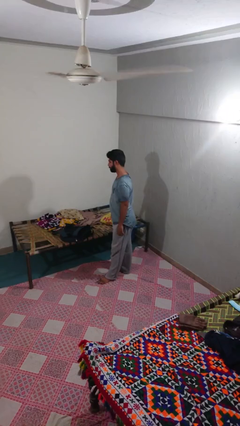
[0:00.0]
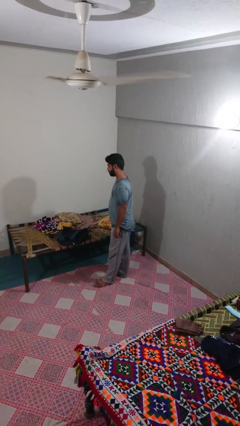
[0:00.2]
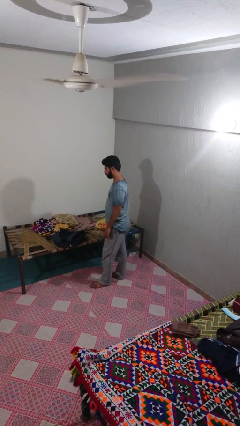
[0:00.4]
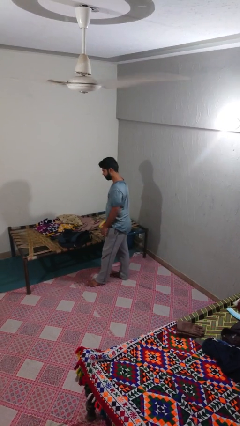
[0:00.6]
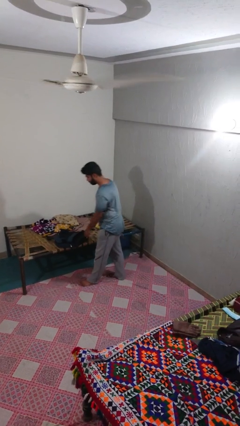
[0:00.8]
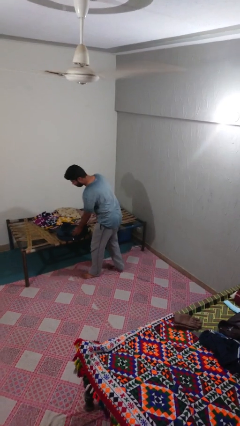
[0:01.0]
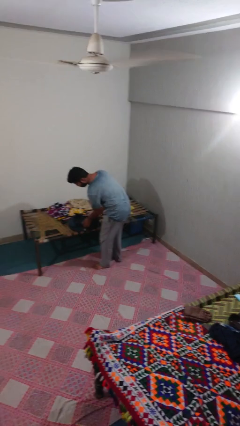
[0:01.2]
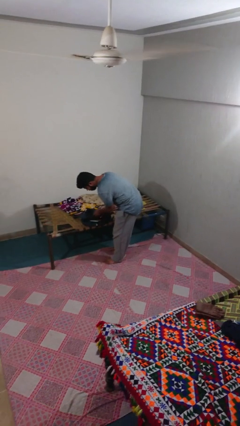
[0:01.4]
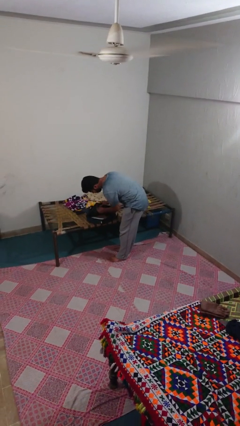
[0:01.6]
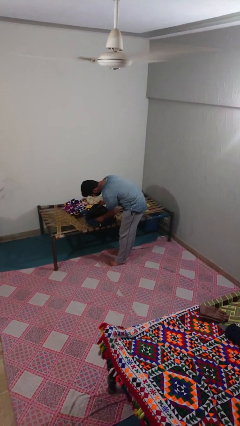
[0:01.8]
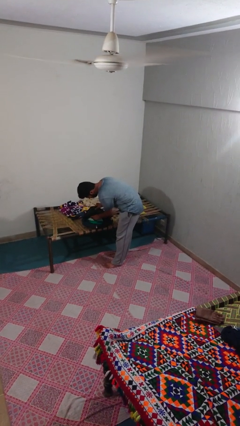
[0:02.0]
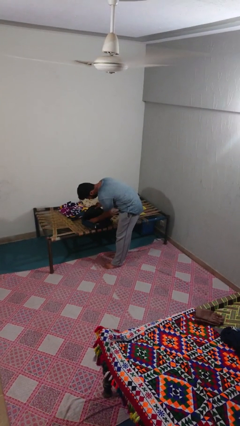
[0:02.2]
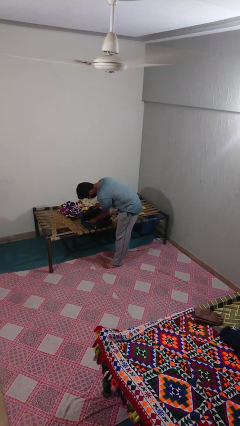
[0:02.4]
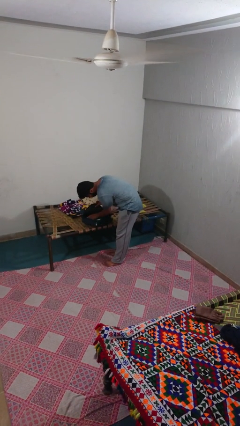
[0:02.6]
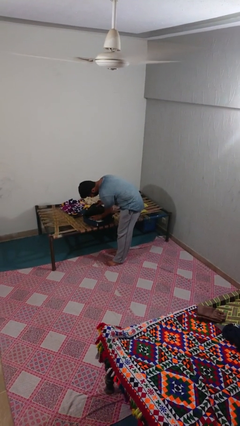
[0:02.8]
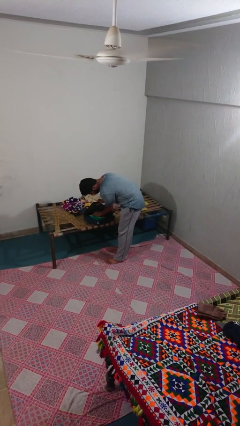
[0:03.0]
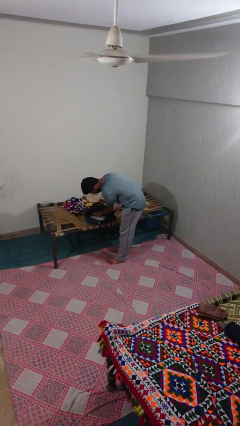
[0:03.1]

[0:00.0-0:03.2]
person searches in backpack

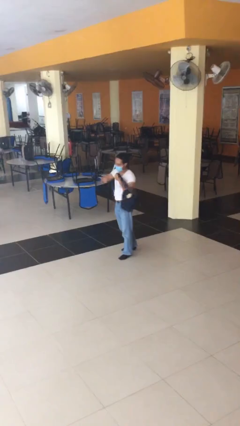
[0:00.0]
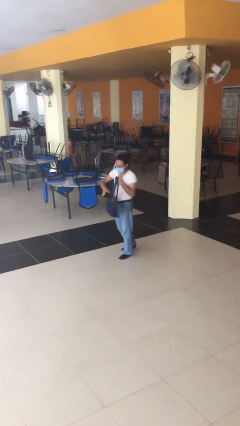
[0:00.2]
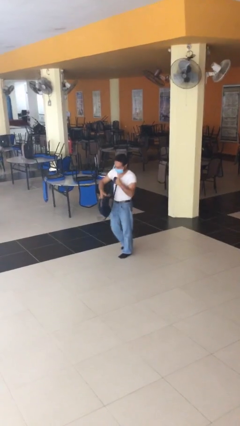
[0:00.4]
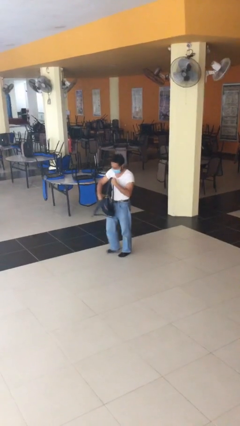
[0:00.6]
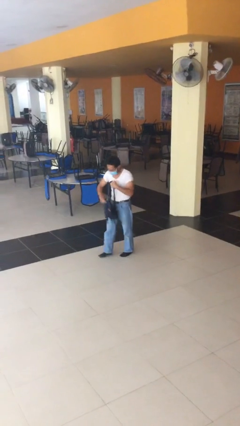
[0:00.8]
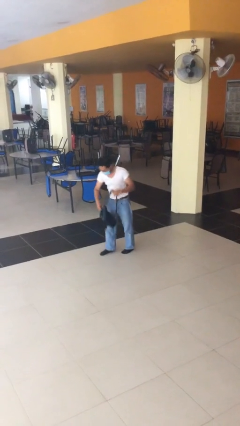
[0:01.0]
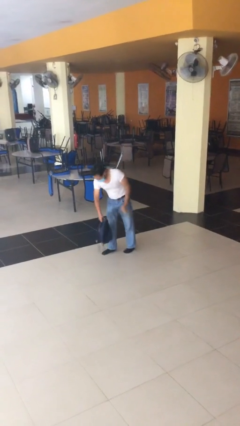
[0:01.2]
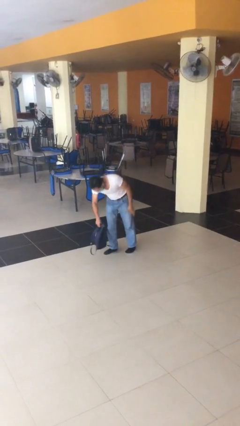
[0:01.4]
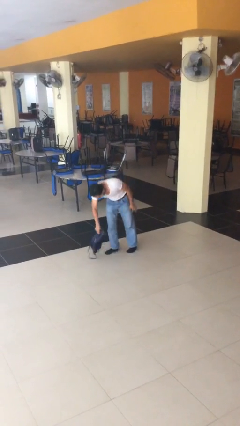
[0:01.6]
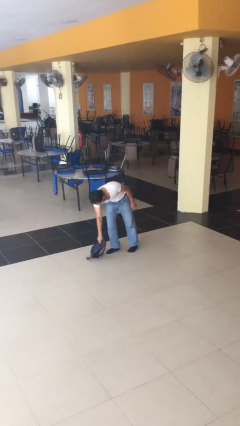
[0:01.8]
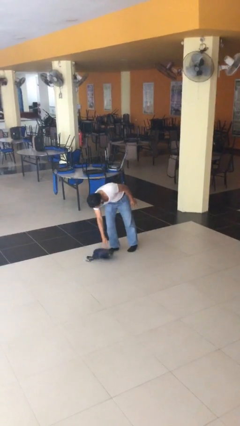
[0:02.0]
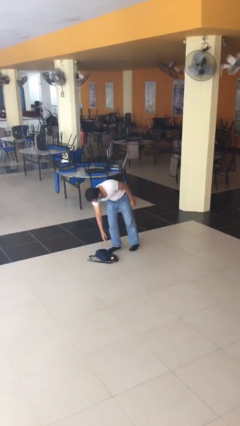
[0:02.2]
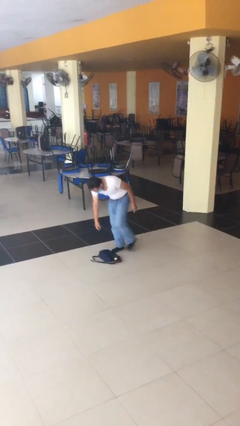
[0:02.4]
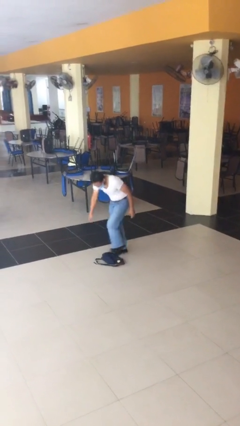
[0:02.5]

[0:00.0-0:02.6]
person puts down object on floor

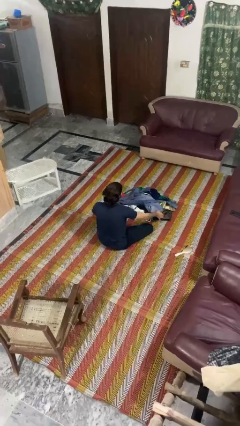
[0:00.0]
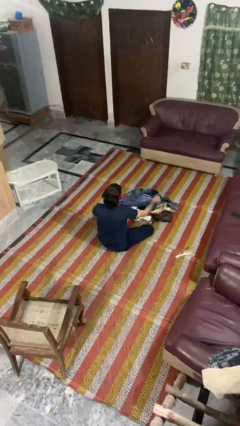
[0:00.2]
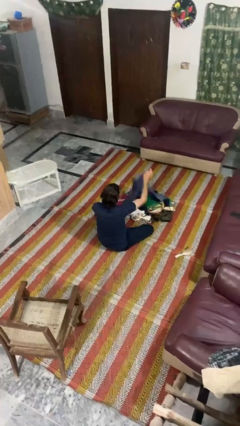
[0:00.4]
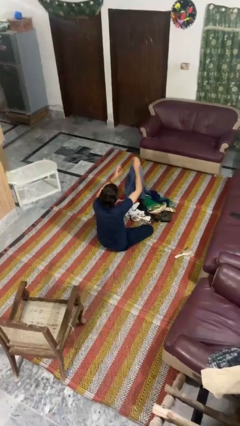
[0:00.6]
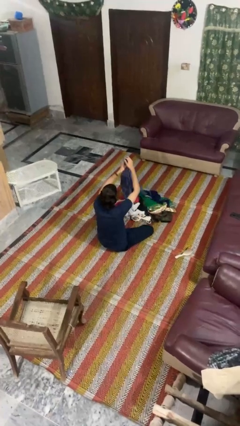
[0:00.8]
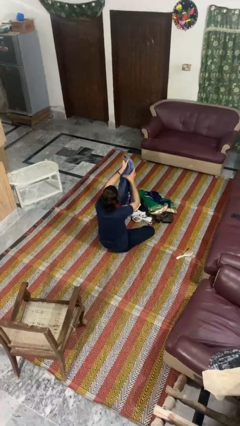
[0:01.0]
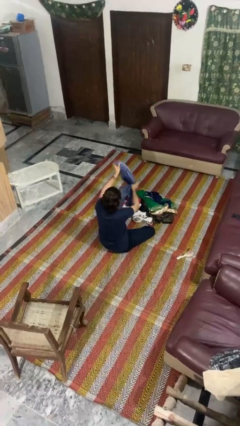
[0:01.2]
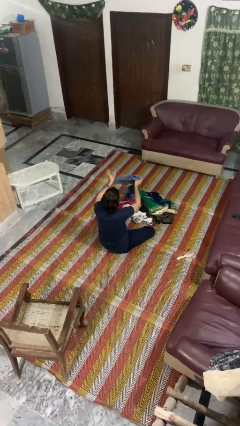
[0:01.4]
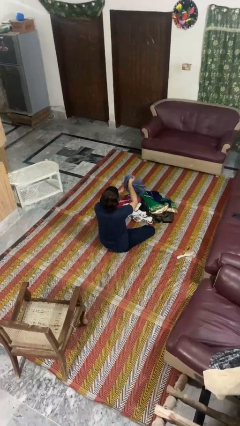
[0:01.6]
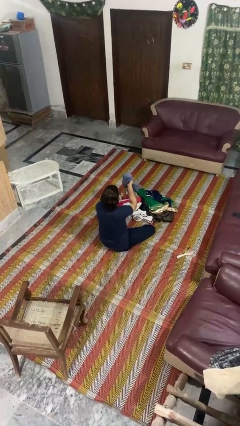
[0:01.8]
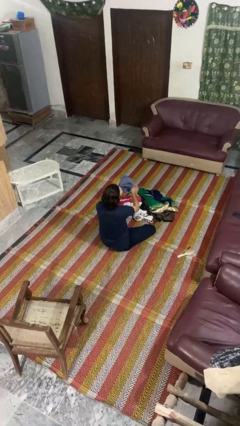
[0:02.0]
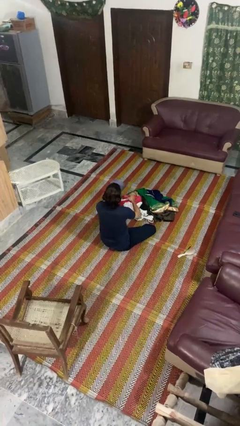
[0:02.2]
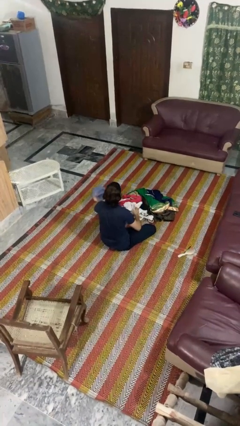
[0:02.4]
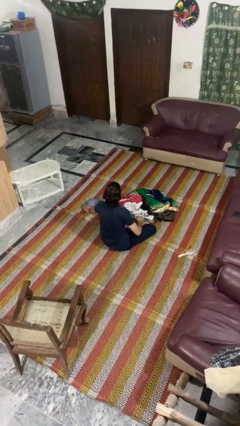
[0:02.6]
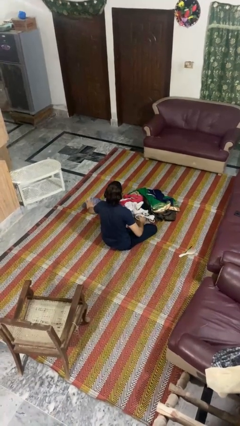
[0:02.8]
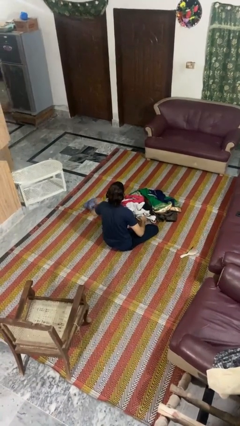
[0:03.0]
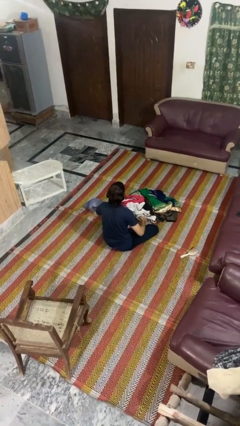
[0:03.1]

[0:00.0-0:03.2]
person folds pants

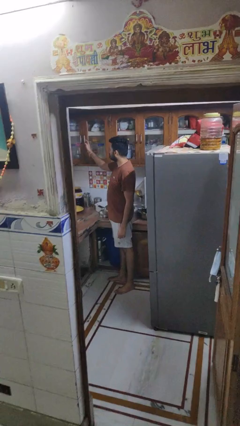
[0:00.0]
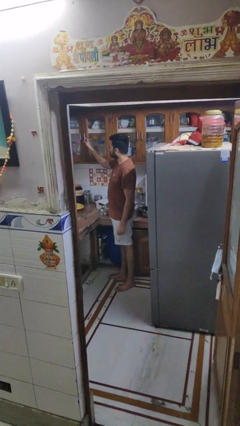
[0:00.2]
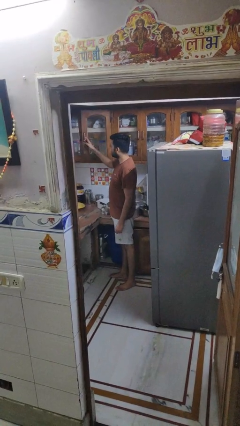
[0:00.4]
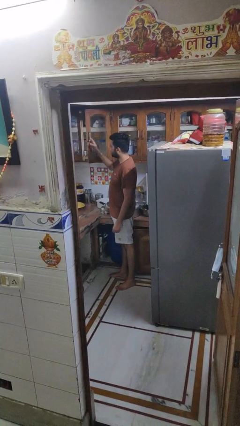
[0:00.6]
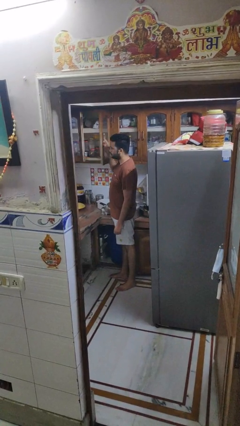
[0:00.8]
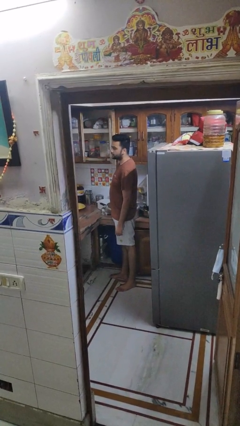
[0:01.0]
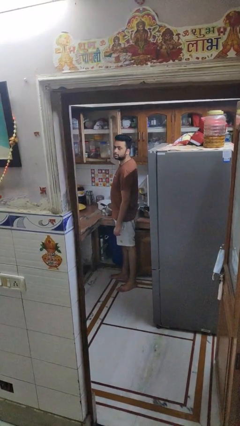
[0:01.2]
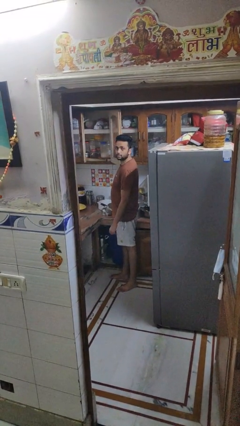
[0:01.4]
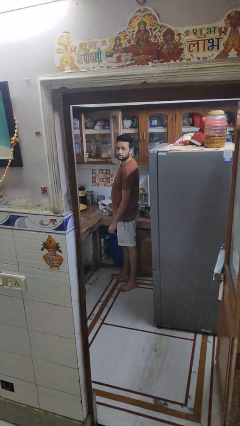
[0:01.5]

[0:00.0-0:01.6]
person opens cabinet

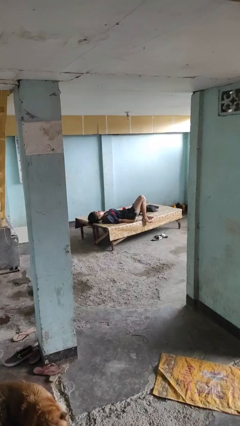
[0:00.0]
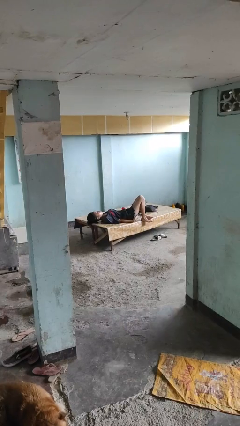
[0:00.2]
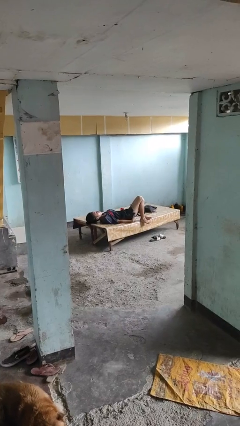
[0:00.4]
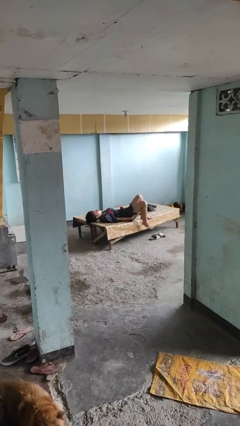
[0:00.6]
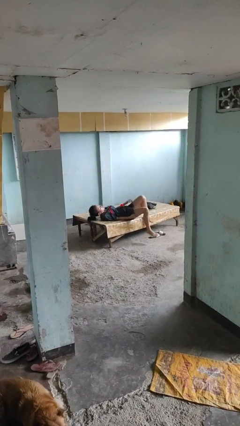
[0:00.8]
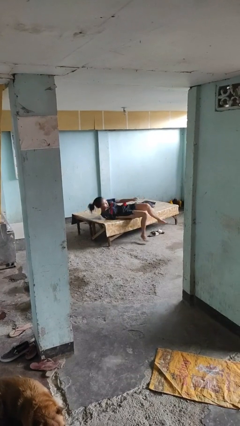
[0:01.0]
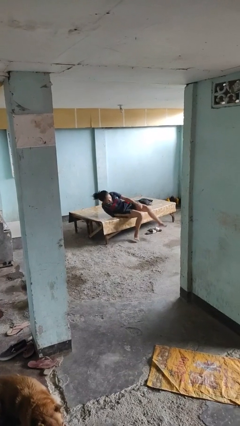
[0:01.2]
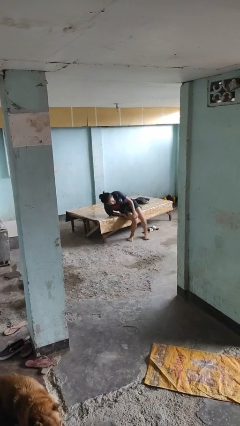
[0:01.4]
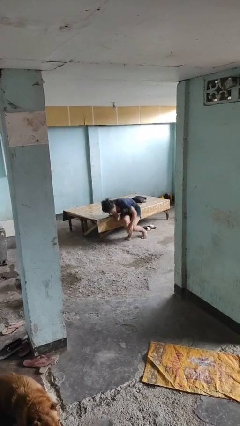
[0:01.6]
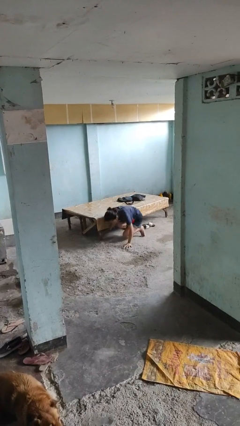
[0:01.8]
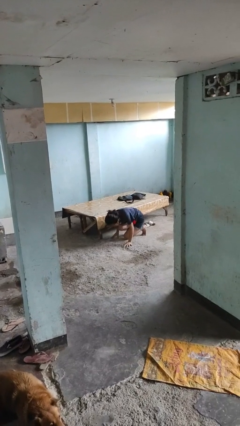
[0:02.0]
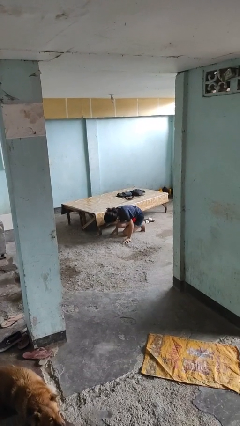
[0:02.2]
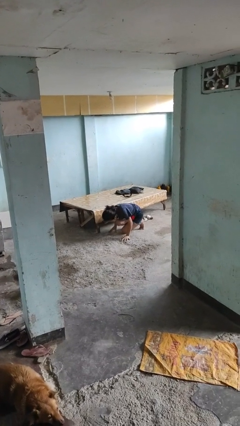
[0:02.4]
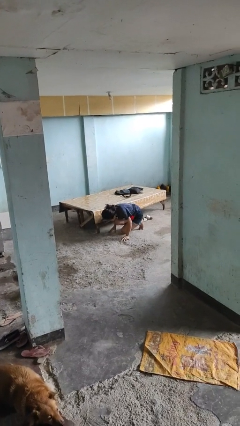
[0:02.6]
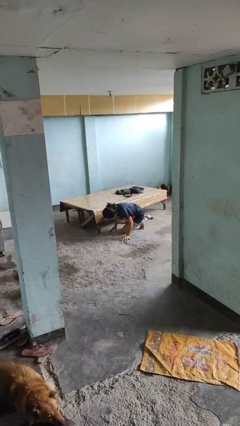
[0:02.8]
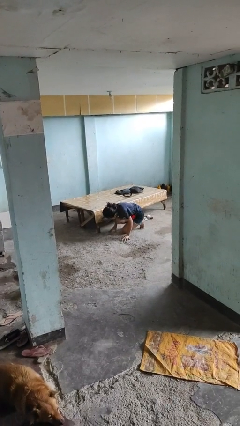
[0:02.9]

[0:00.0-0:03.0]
person falls from bed

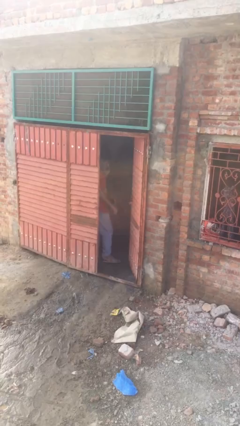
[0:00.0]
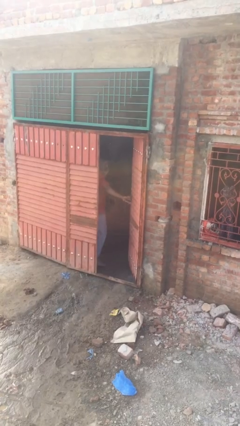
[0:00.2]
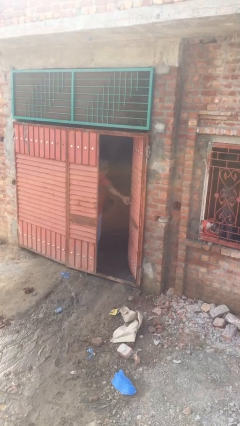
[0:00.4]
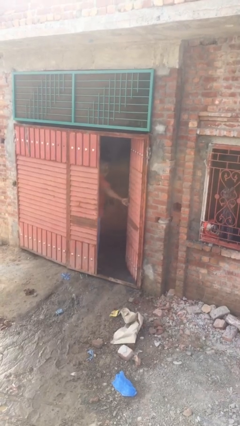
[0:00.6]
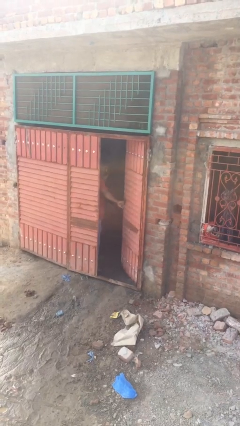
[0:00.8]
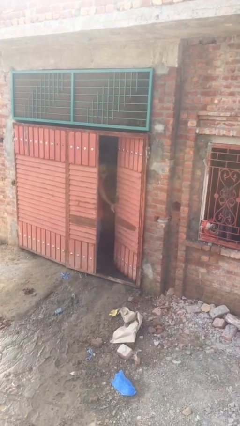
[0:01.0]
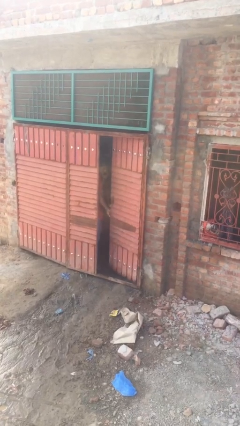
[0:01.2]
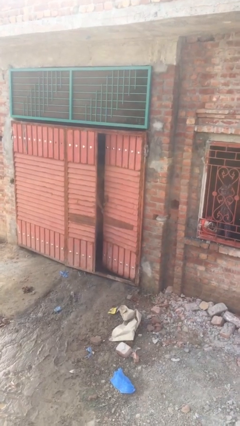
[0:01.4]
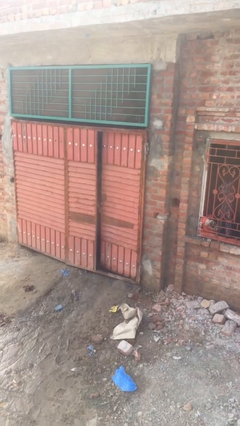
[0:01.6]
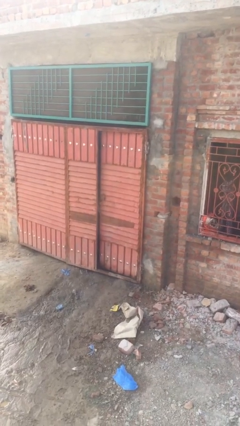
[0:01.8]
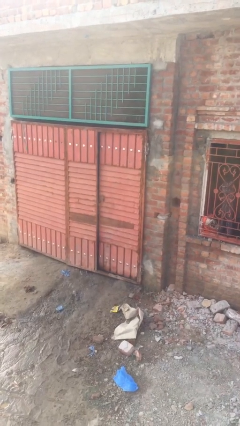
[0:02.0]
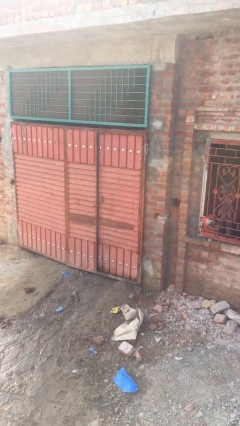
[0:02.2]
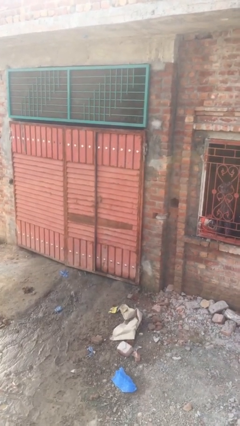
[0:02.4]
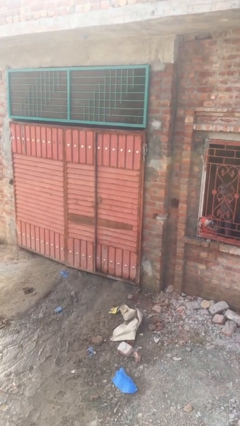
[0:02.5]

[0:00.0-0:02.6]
person closes facility door

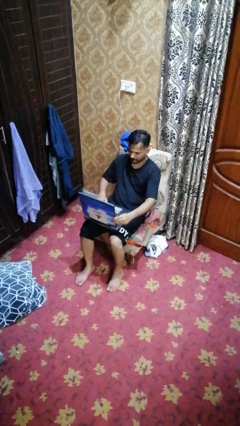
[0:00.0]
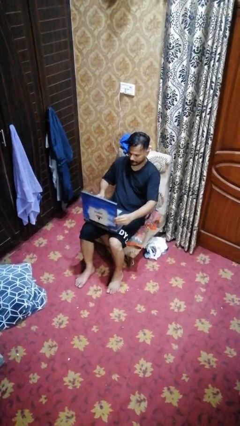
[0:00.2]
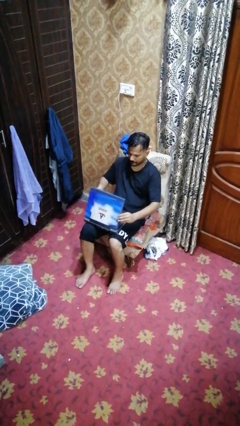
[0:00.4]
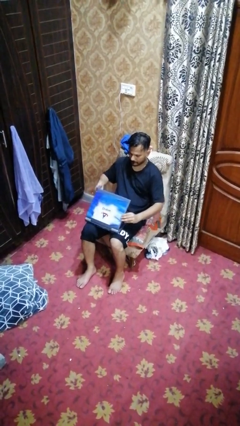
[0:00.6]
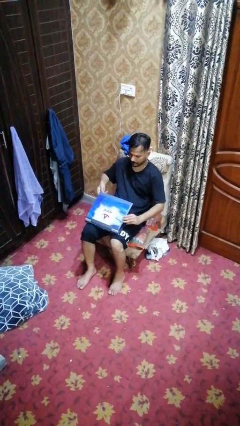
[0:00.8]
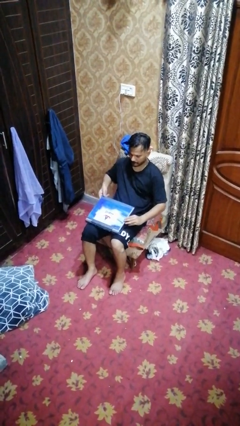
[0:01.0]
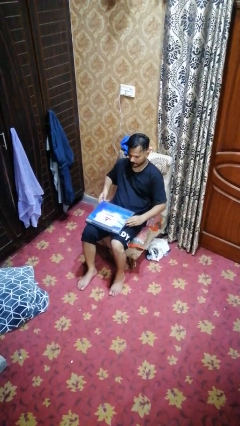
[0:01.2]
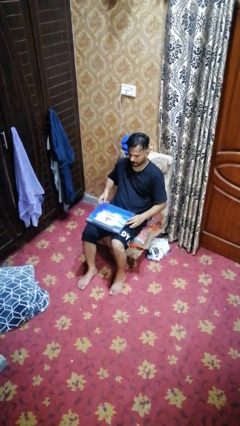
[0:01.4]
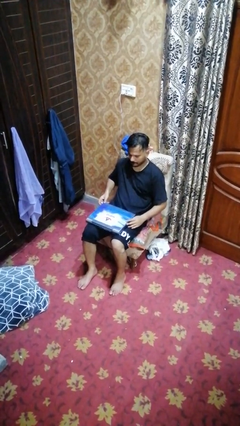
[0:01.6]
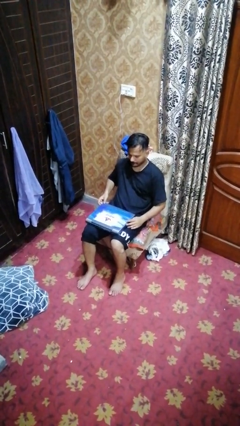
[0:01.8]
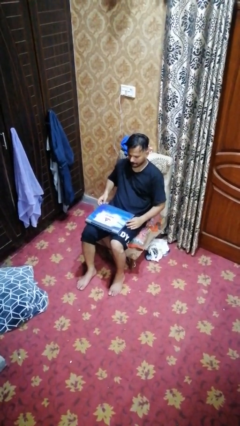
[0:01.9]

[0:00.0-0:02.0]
person closes laptop
